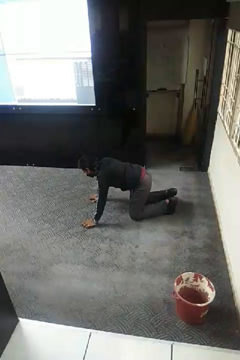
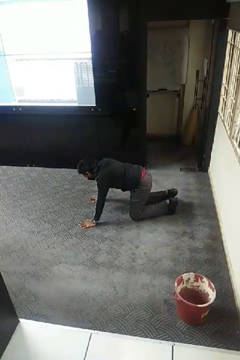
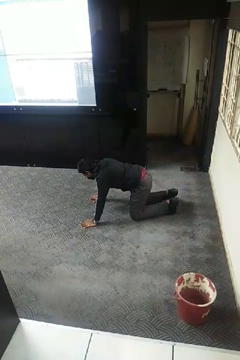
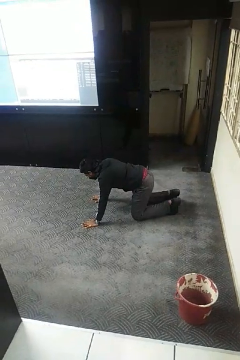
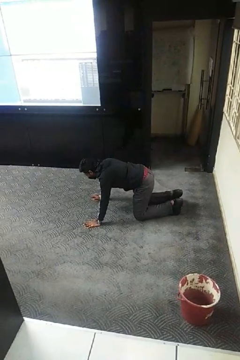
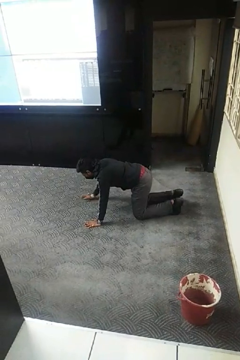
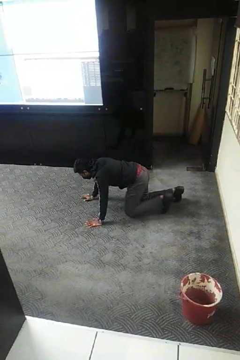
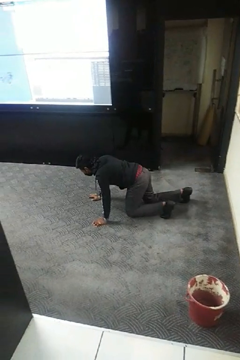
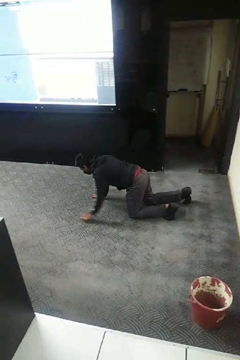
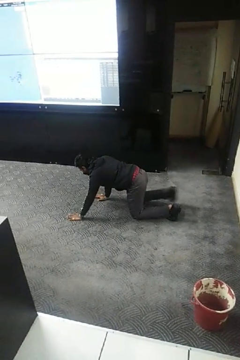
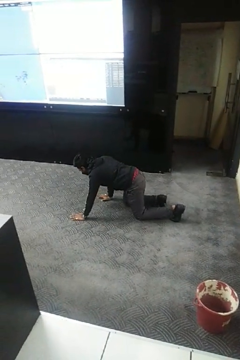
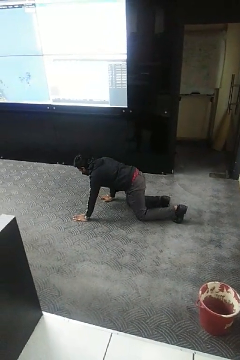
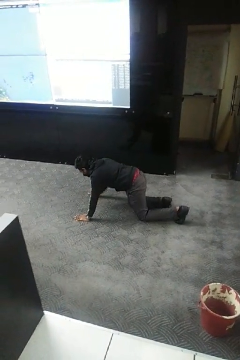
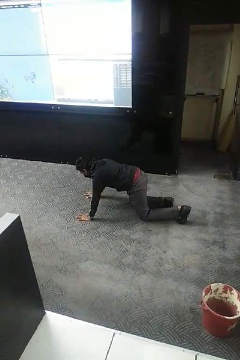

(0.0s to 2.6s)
person crawls

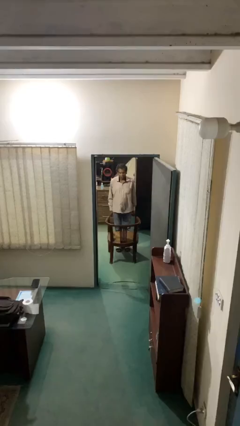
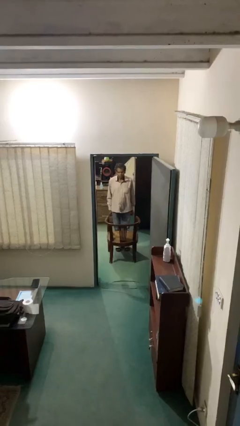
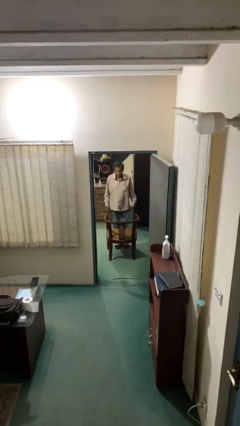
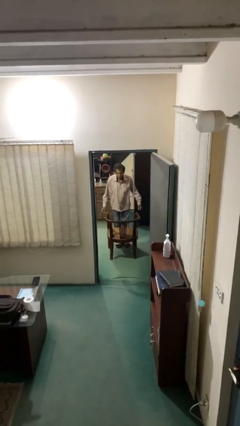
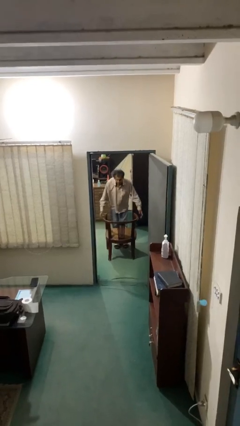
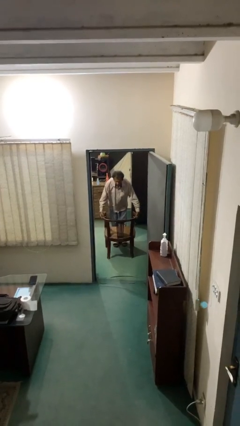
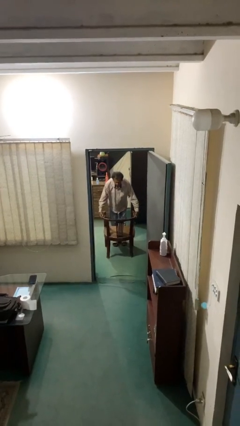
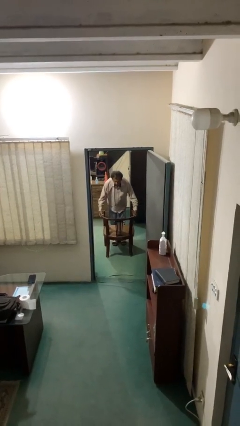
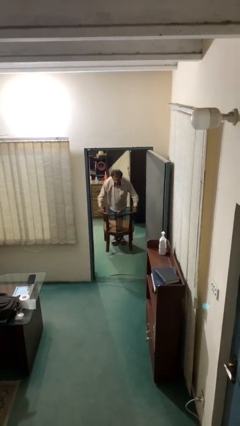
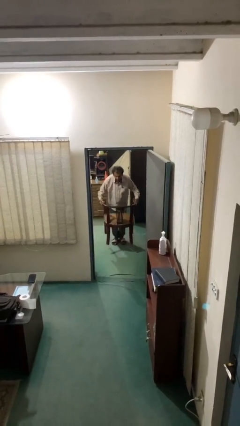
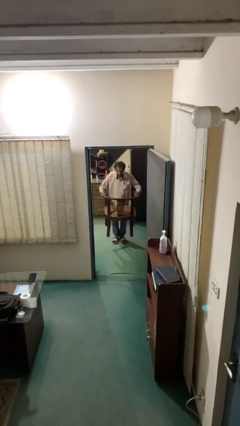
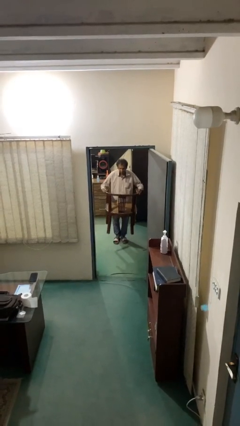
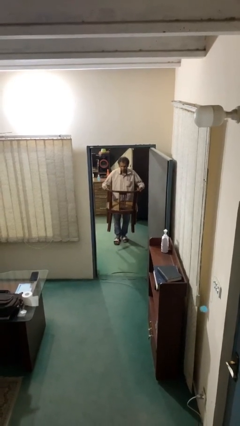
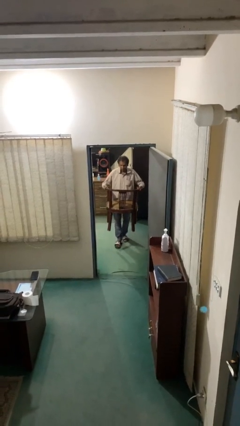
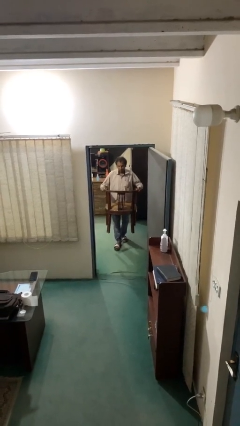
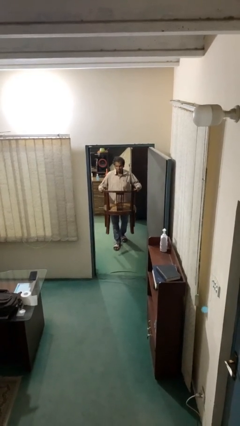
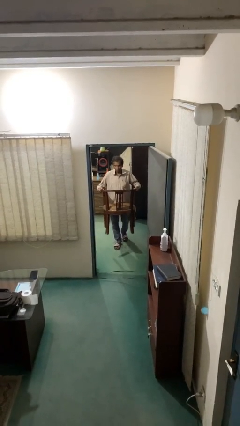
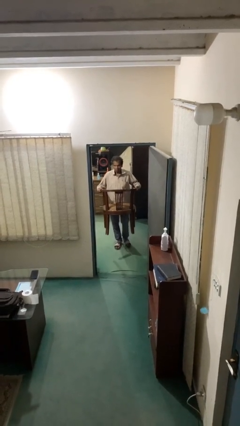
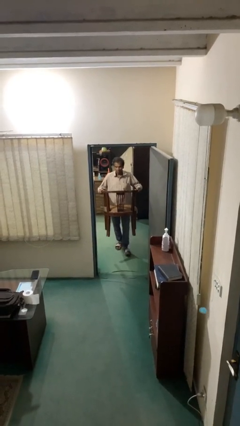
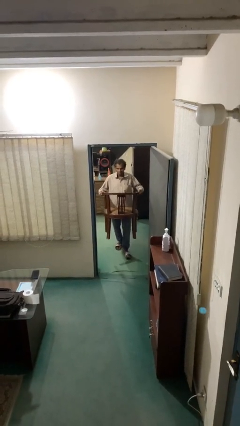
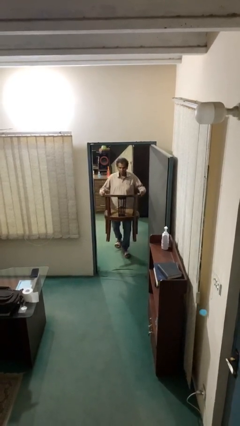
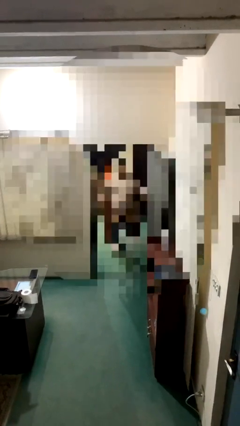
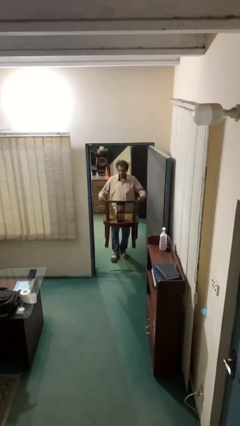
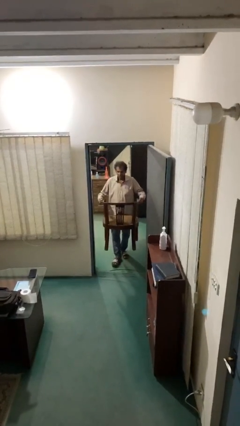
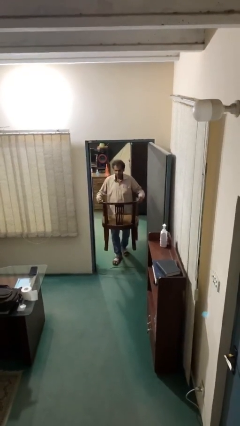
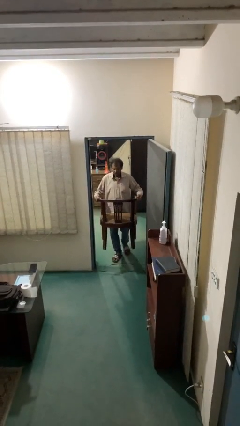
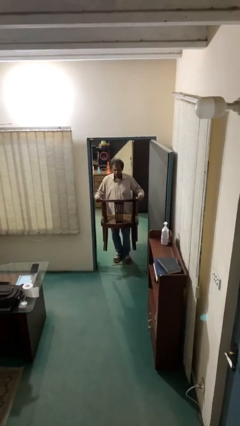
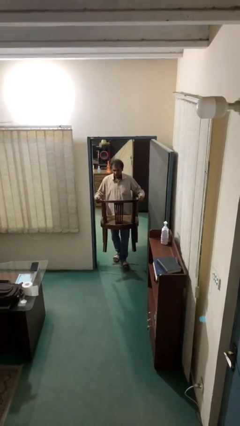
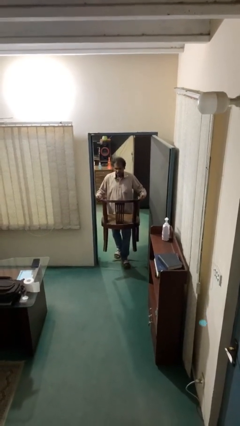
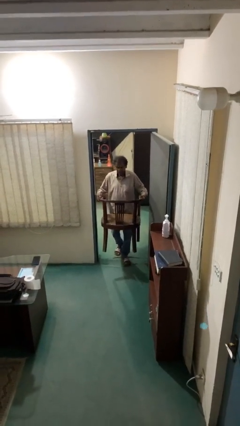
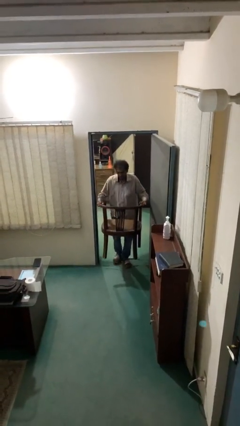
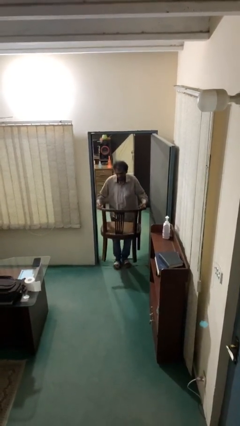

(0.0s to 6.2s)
person carries heavy object

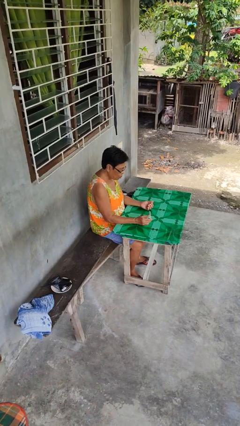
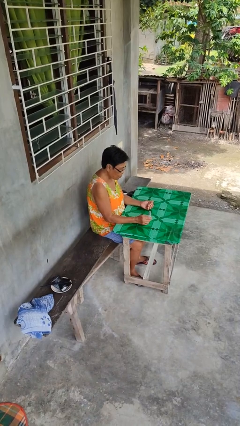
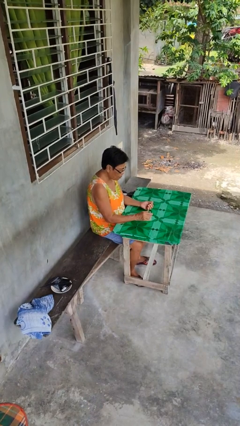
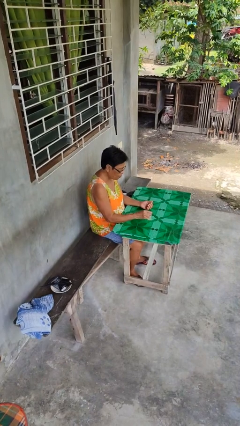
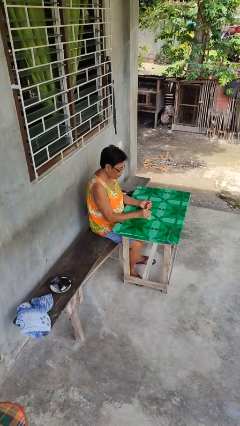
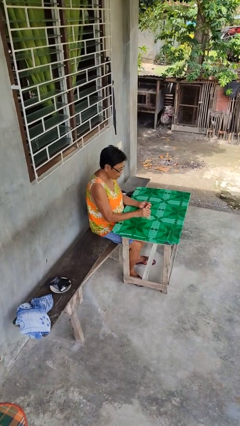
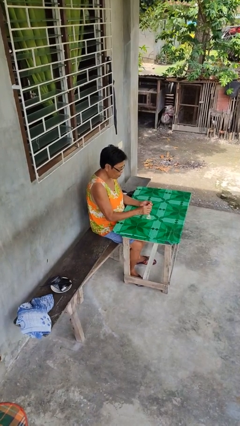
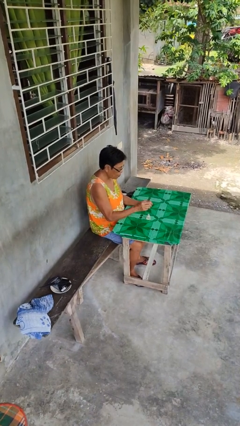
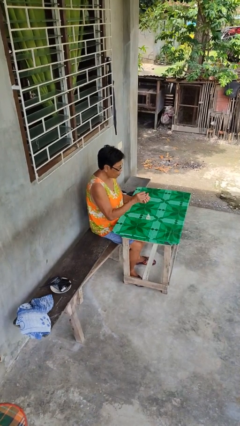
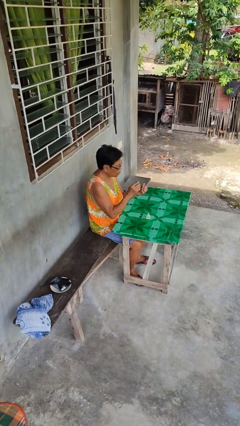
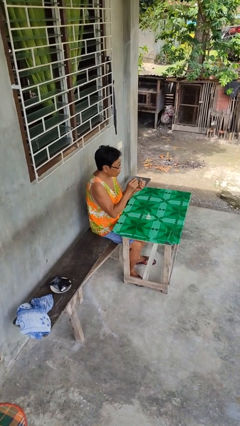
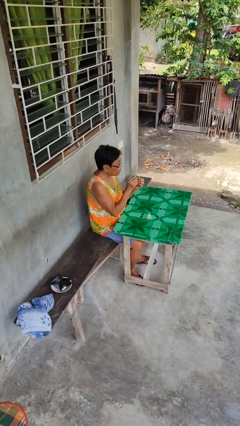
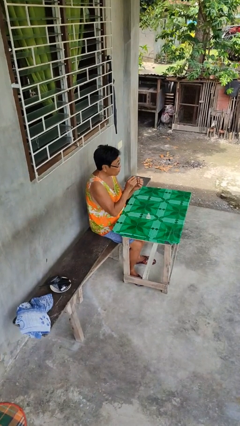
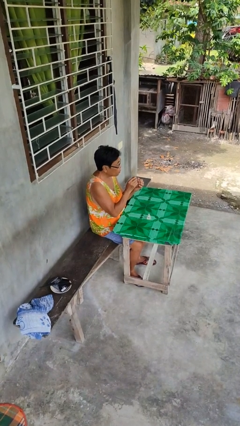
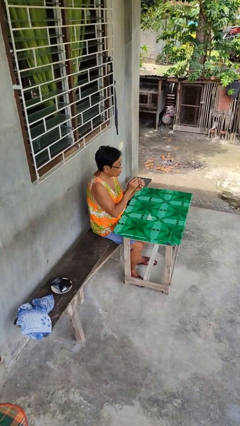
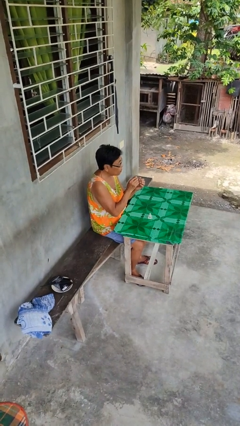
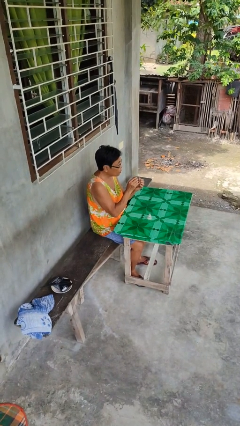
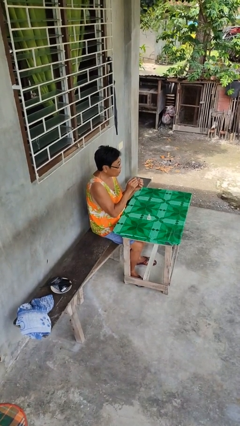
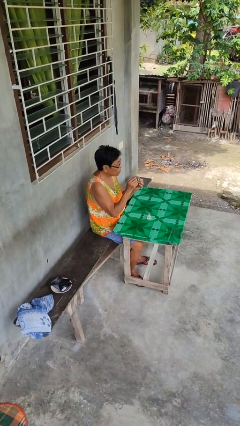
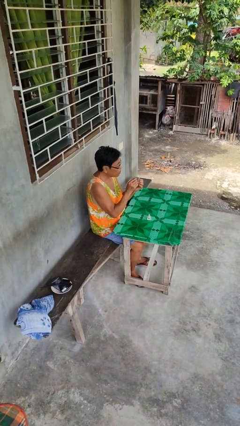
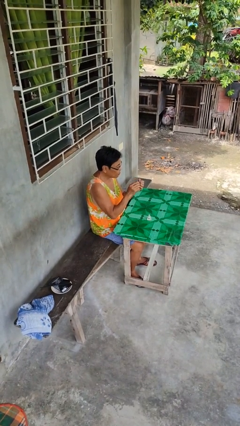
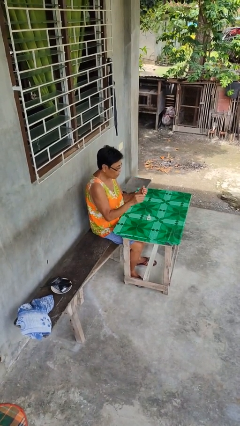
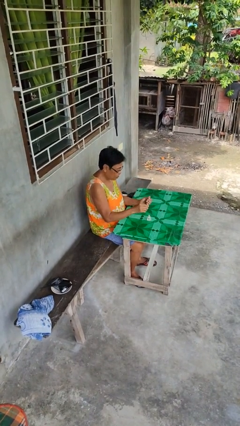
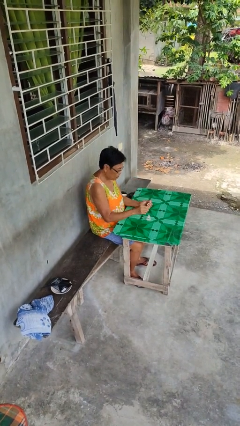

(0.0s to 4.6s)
person paints fingernails

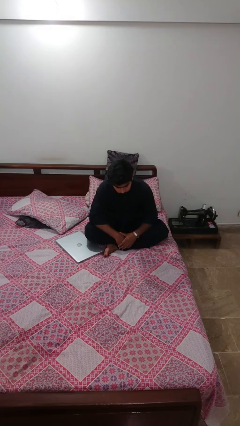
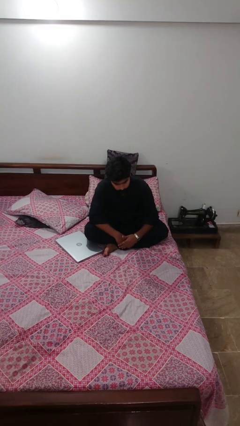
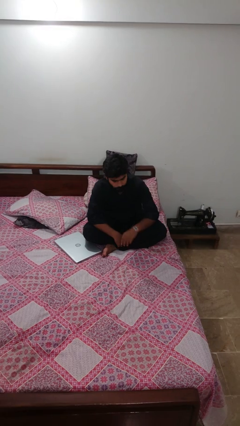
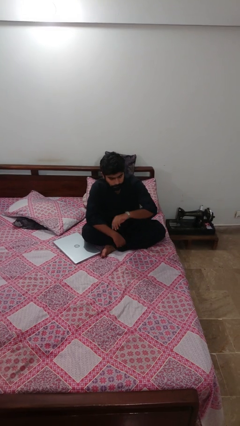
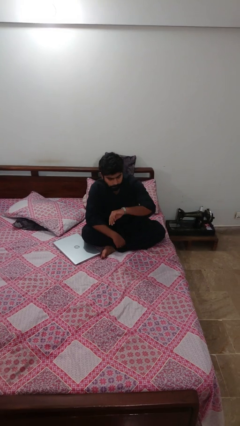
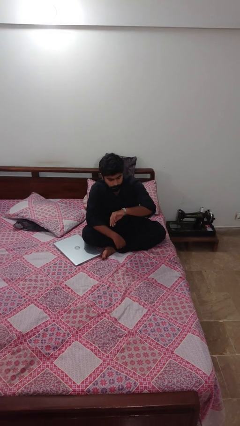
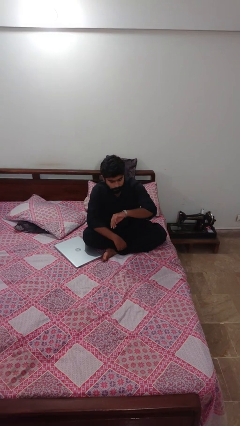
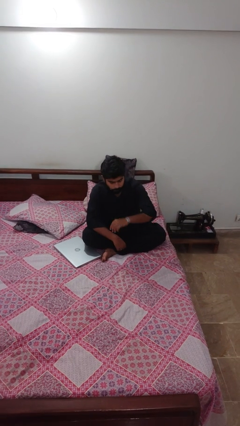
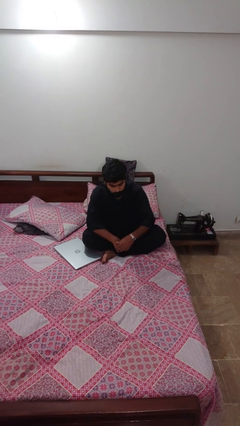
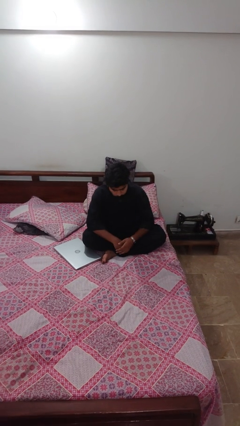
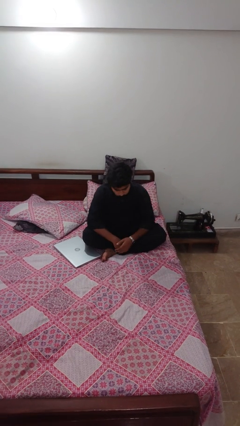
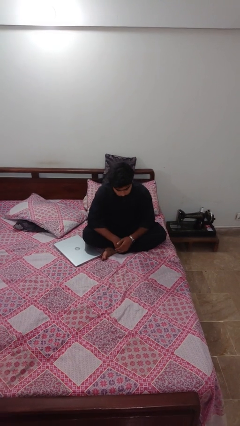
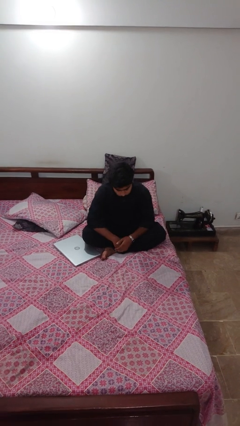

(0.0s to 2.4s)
person looks at wristwatch

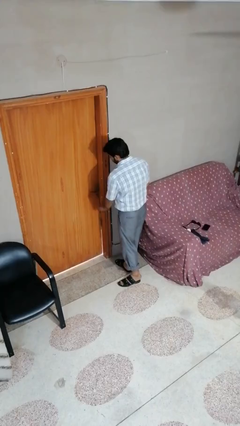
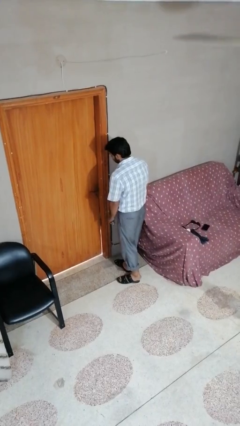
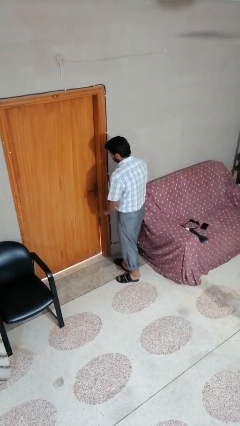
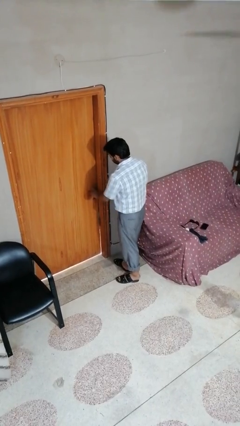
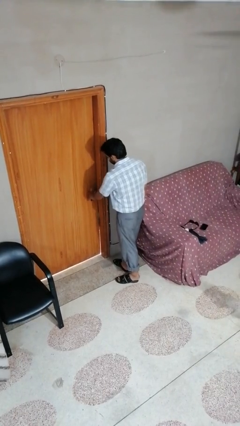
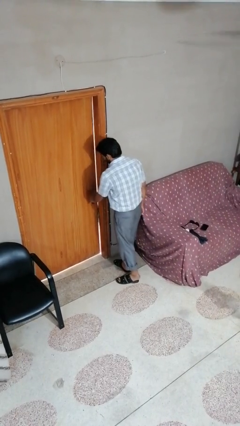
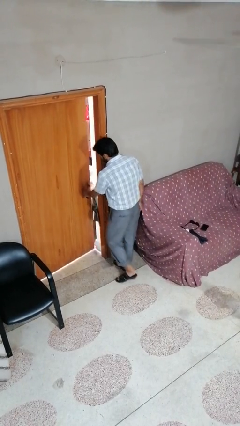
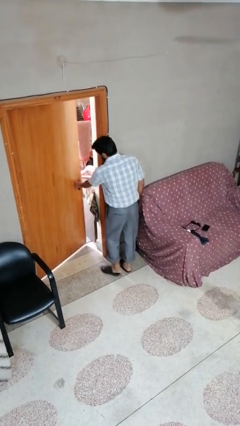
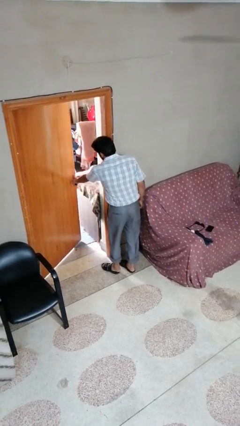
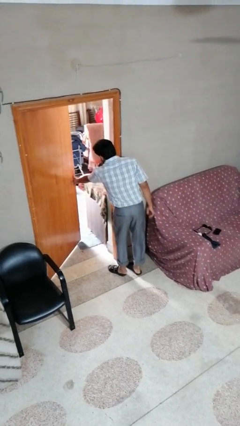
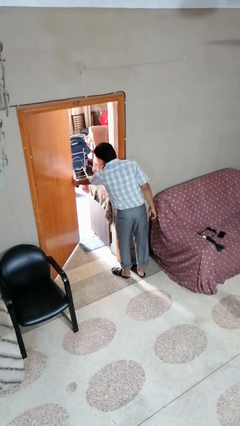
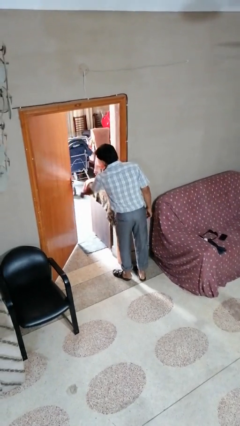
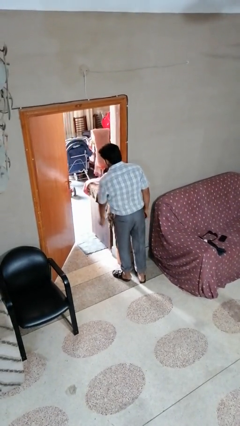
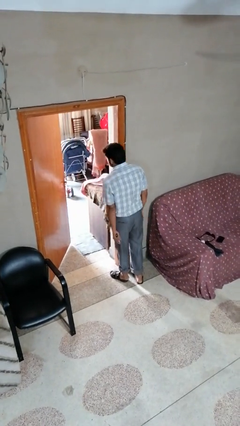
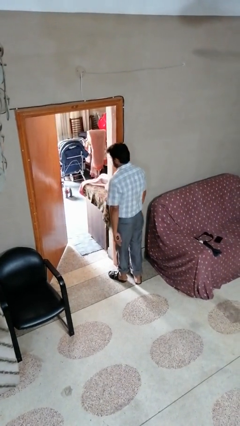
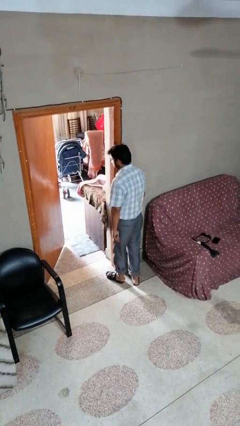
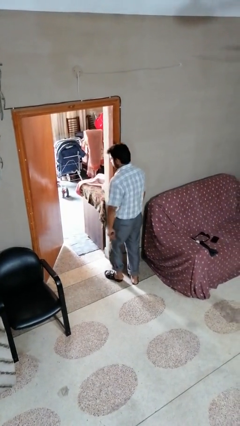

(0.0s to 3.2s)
person opens facility door
